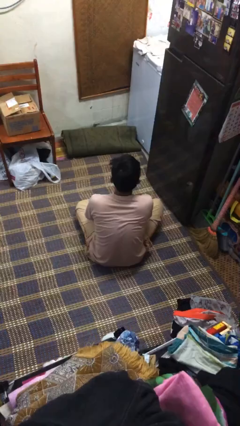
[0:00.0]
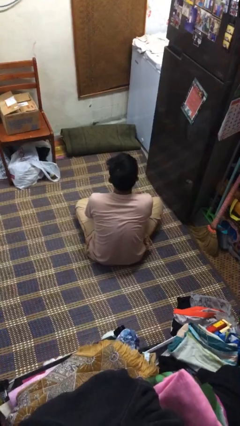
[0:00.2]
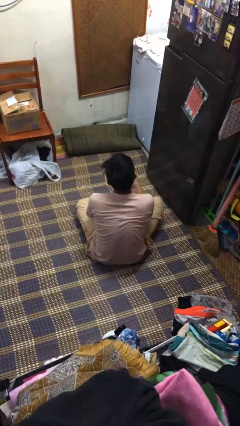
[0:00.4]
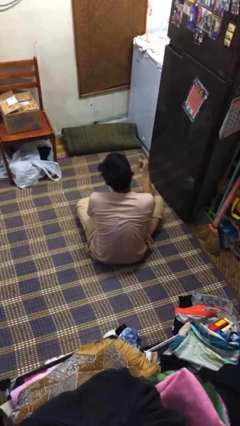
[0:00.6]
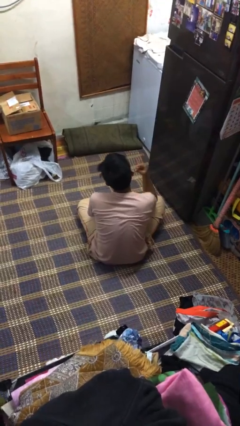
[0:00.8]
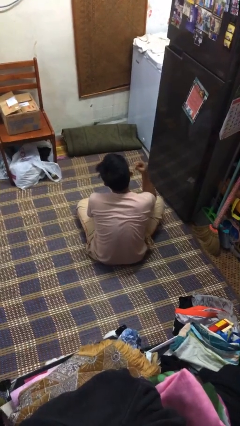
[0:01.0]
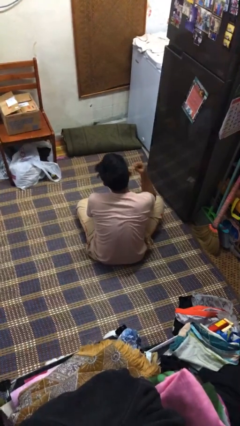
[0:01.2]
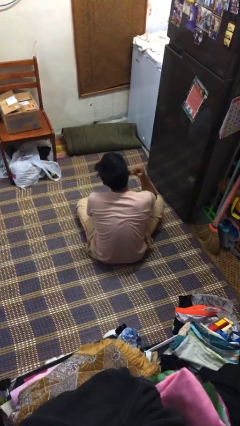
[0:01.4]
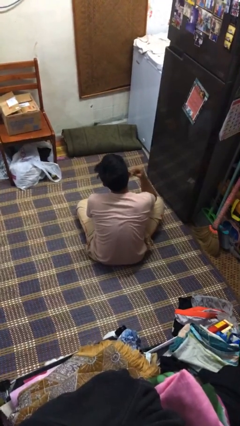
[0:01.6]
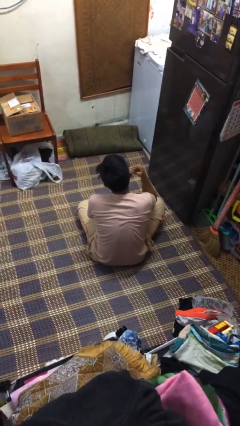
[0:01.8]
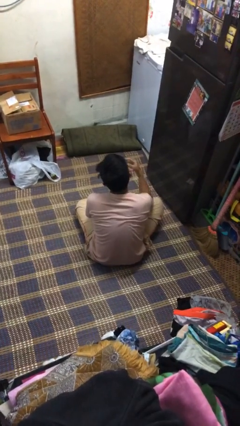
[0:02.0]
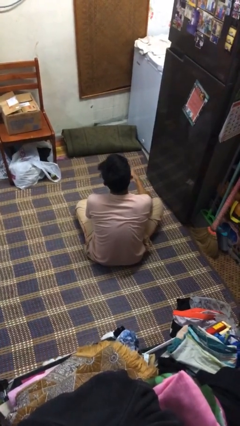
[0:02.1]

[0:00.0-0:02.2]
person gestures listen closely

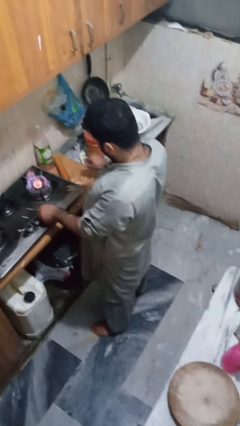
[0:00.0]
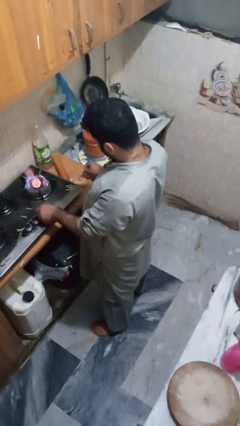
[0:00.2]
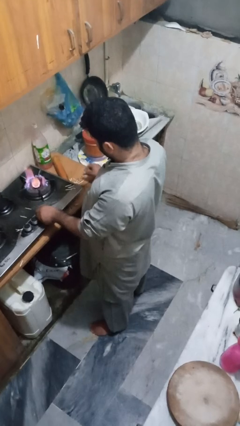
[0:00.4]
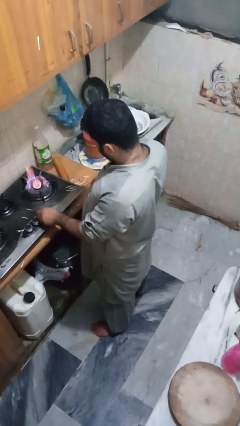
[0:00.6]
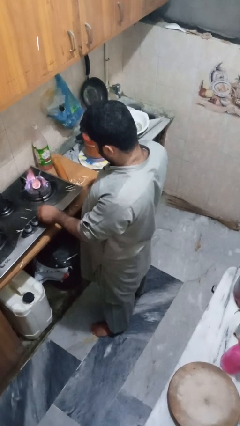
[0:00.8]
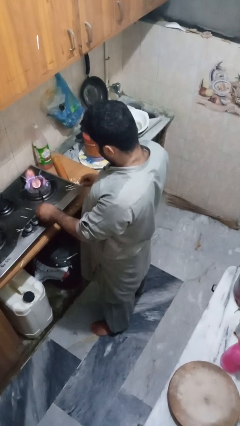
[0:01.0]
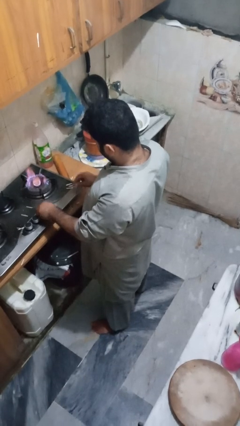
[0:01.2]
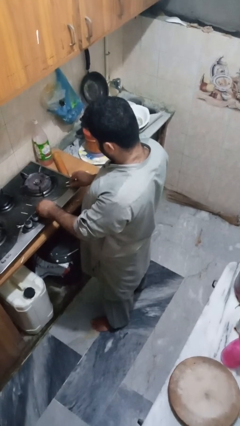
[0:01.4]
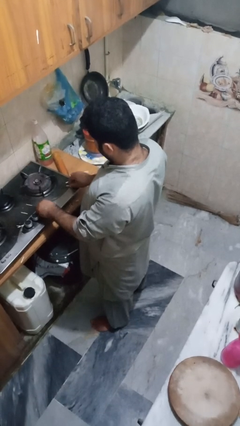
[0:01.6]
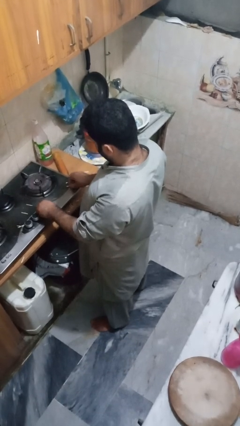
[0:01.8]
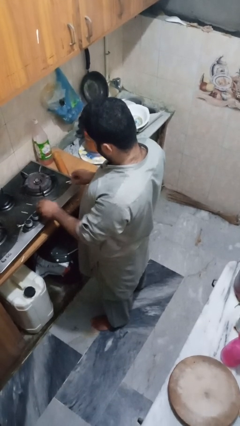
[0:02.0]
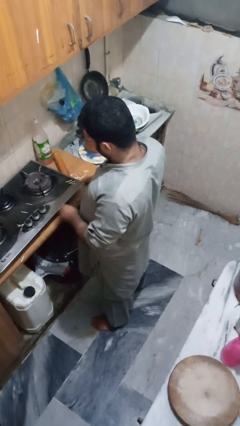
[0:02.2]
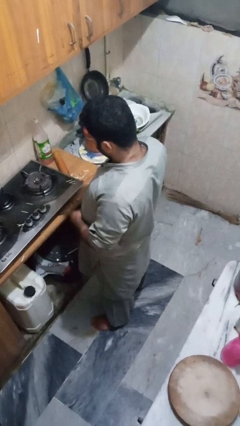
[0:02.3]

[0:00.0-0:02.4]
person turns off stovetop

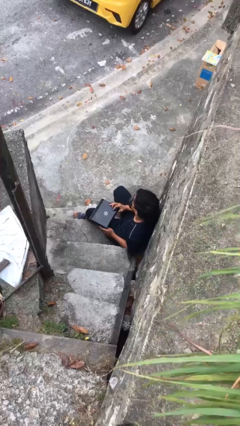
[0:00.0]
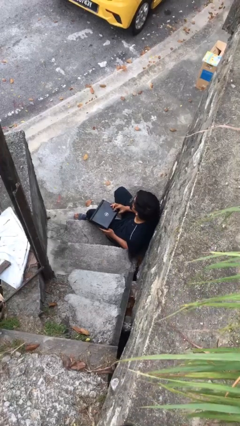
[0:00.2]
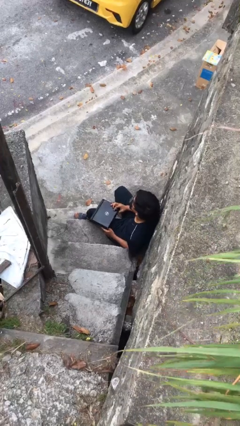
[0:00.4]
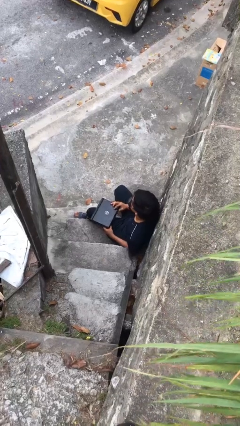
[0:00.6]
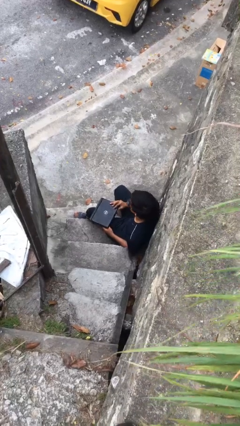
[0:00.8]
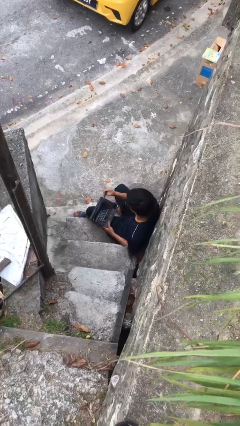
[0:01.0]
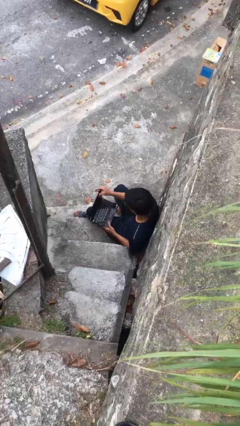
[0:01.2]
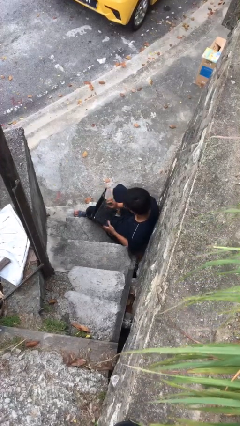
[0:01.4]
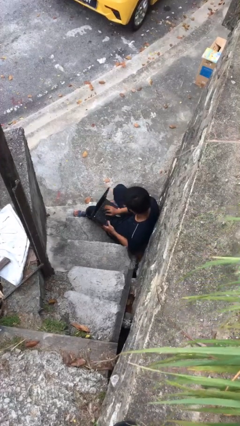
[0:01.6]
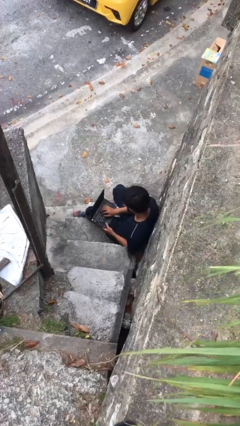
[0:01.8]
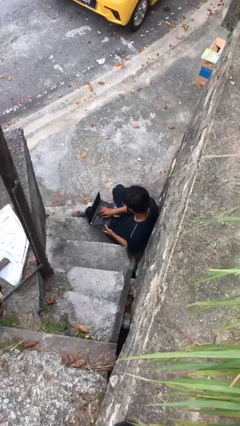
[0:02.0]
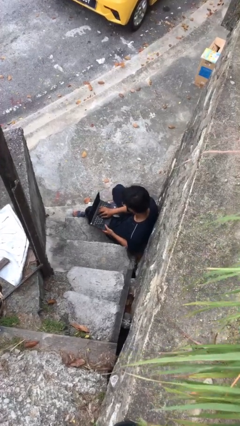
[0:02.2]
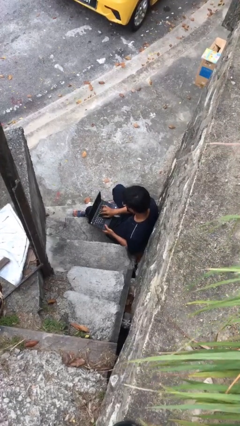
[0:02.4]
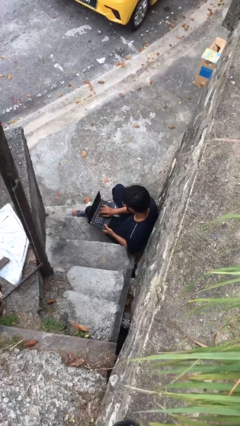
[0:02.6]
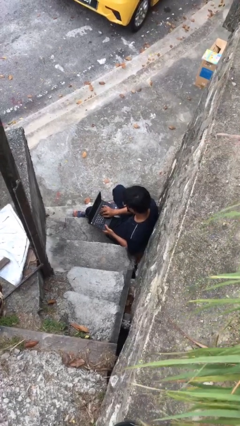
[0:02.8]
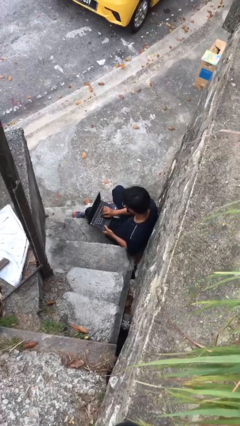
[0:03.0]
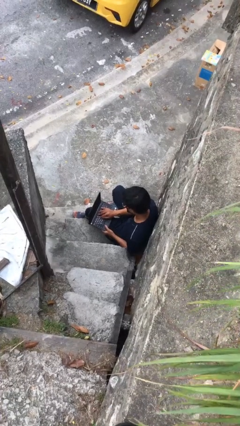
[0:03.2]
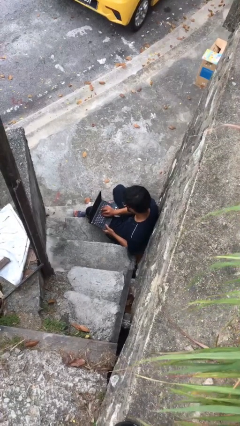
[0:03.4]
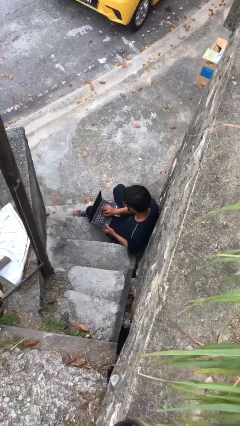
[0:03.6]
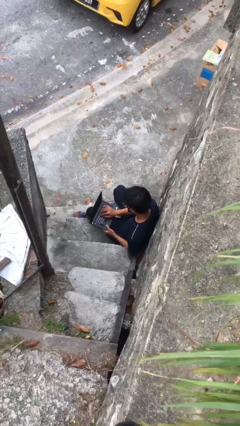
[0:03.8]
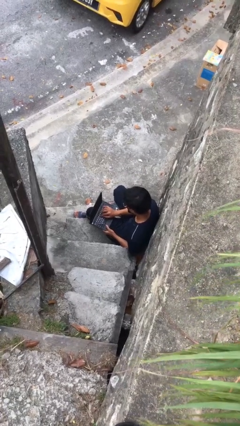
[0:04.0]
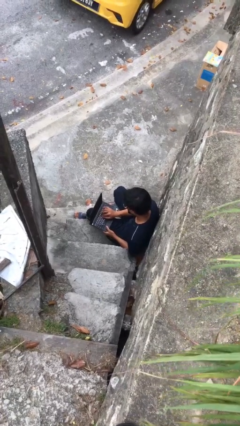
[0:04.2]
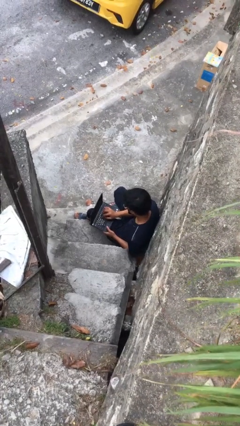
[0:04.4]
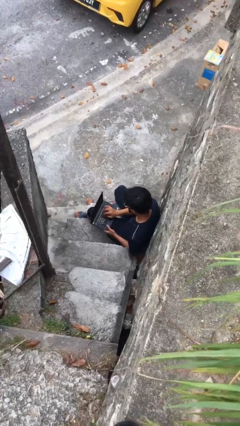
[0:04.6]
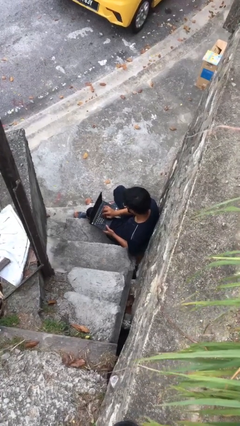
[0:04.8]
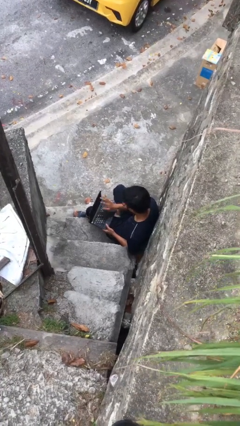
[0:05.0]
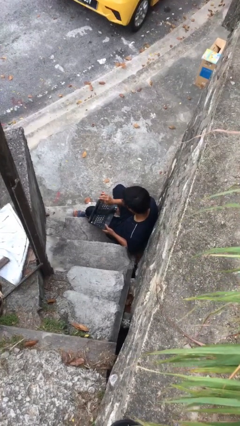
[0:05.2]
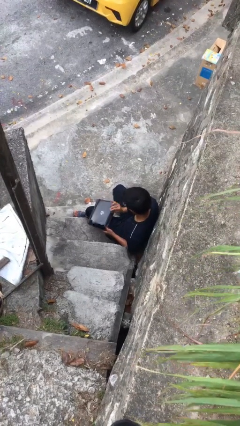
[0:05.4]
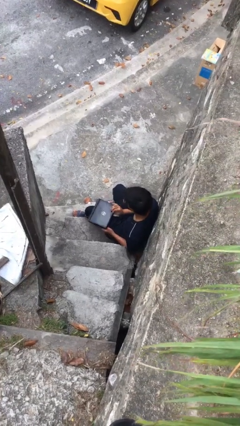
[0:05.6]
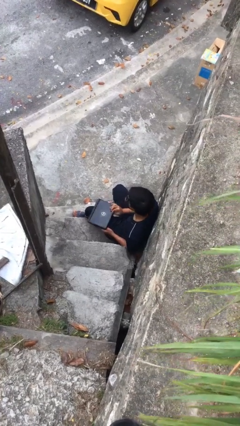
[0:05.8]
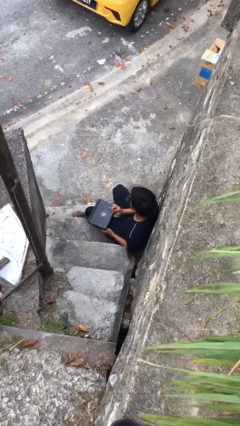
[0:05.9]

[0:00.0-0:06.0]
person interacts with laptop

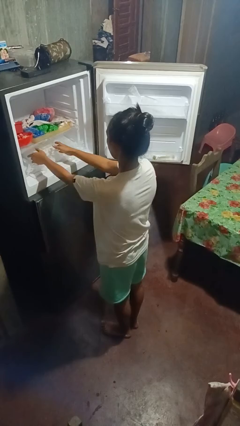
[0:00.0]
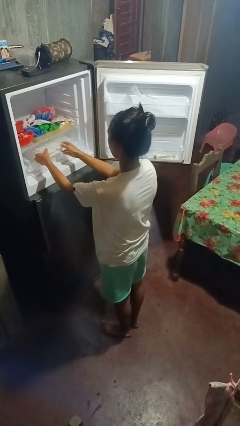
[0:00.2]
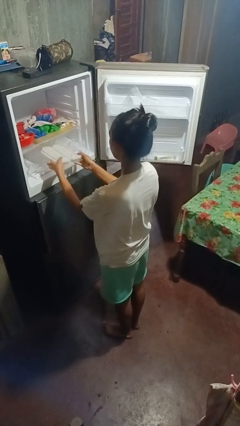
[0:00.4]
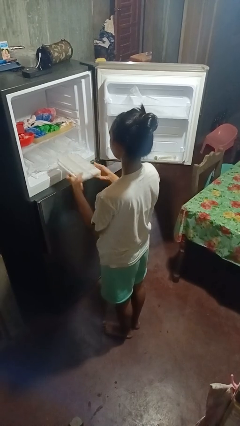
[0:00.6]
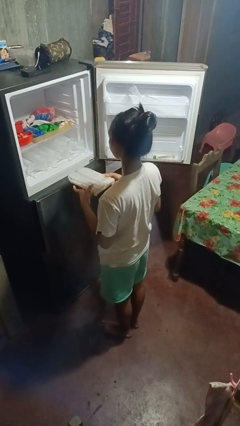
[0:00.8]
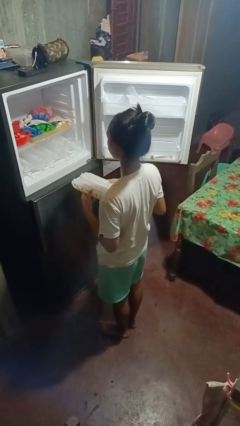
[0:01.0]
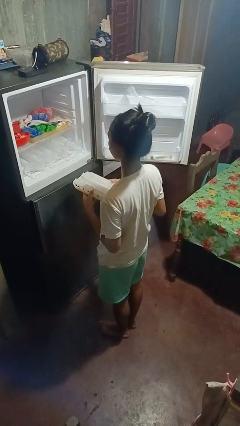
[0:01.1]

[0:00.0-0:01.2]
person takes object from refrigerator

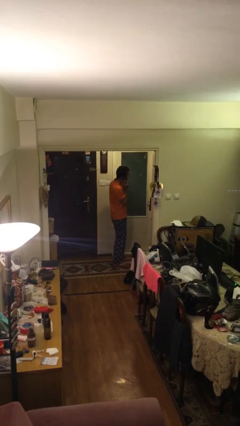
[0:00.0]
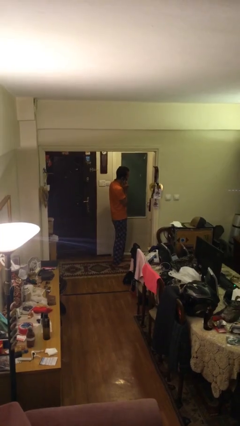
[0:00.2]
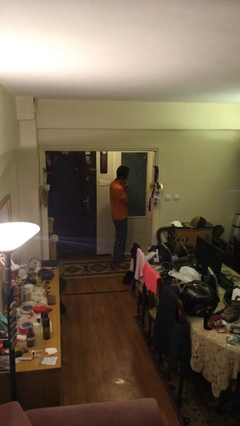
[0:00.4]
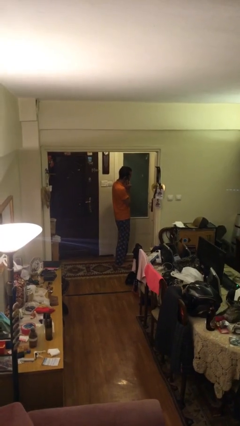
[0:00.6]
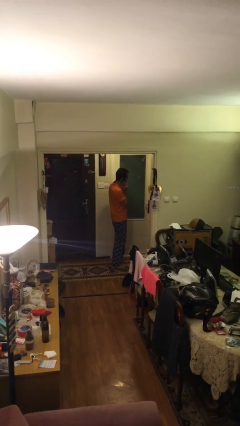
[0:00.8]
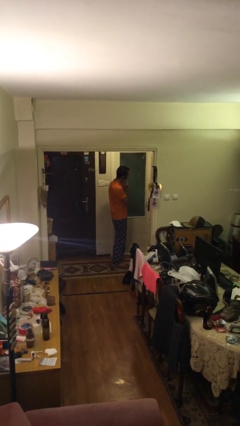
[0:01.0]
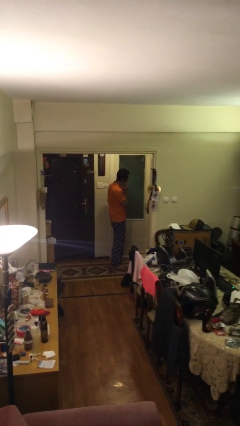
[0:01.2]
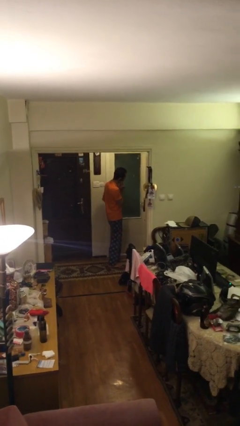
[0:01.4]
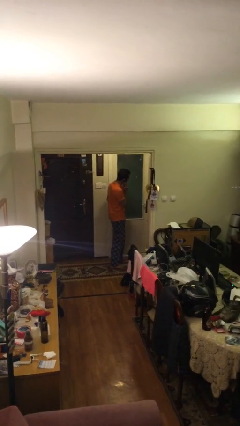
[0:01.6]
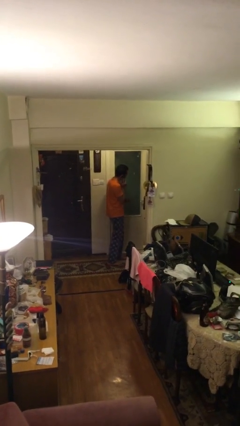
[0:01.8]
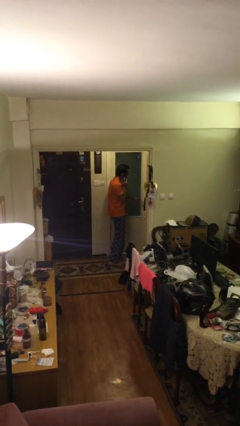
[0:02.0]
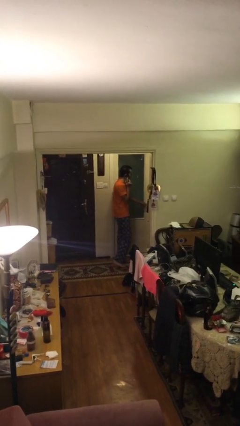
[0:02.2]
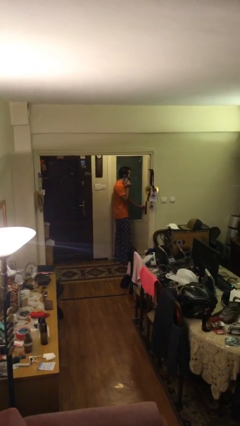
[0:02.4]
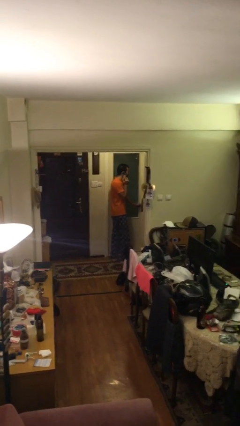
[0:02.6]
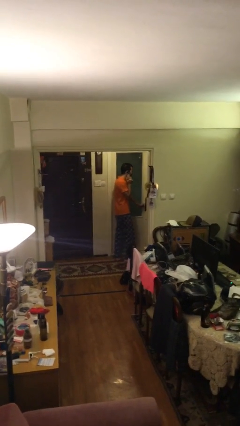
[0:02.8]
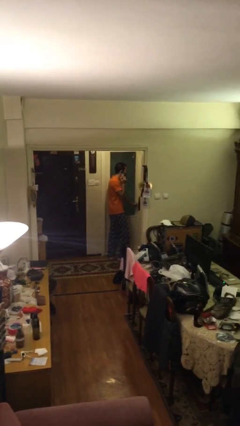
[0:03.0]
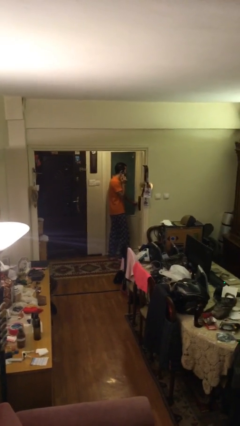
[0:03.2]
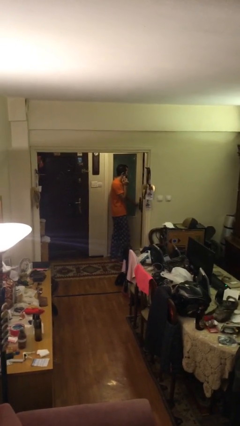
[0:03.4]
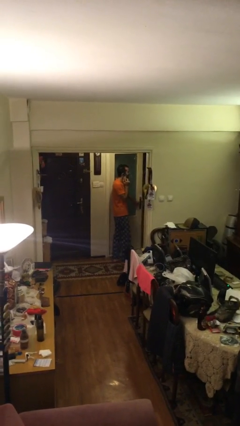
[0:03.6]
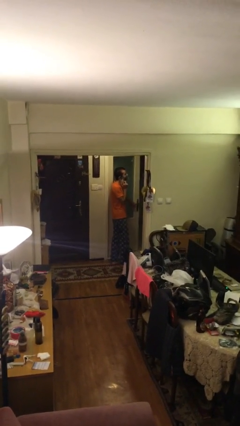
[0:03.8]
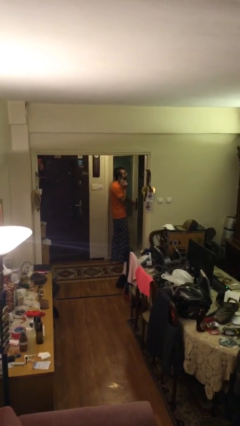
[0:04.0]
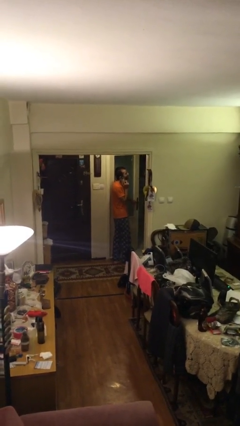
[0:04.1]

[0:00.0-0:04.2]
person opens facility door

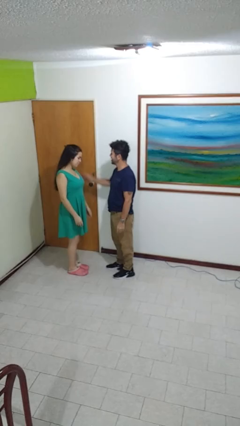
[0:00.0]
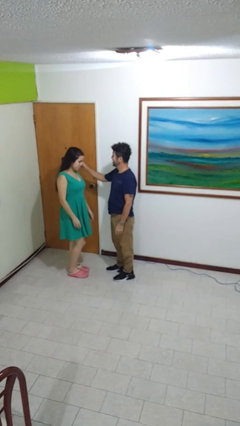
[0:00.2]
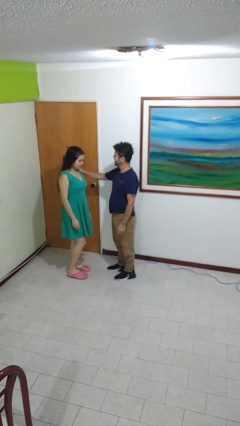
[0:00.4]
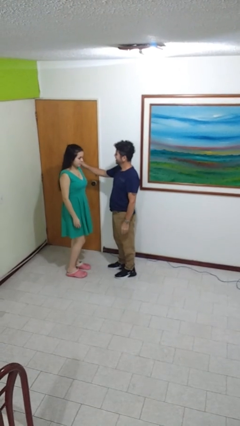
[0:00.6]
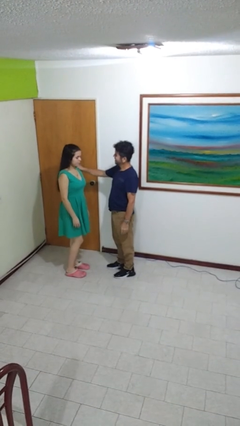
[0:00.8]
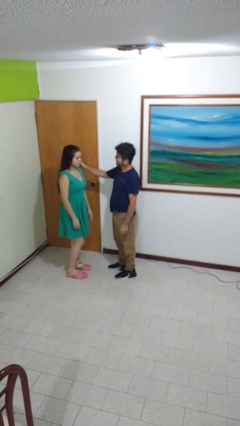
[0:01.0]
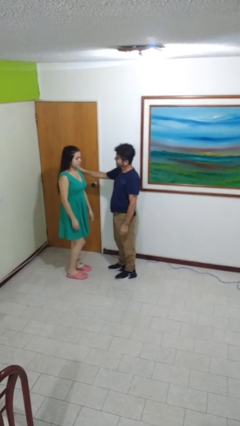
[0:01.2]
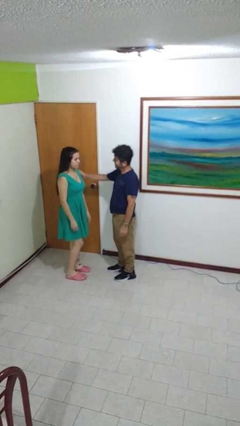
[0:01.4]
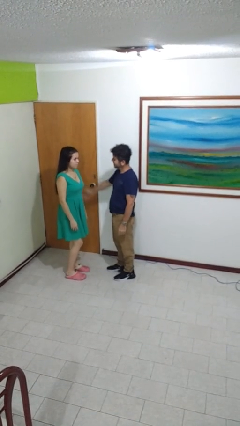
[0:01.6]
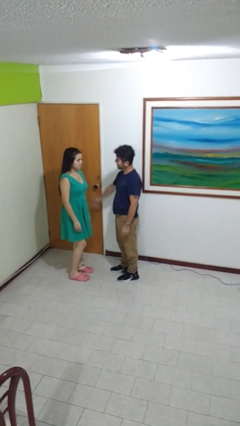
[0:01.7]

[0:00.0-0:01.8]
person pounds shoulders of person
